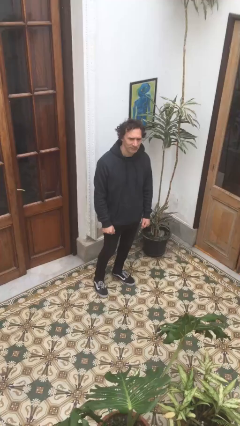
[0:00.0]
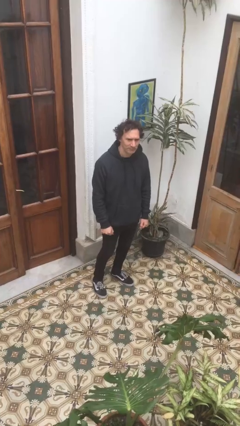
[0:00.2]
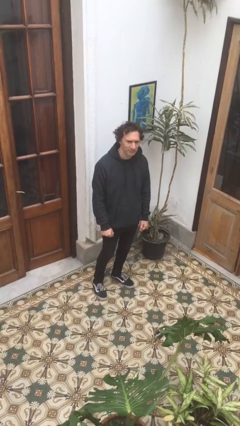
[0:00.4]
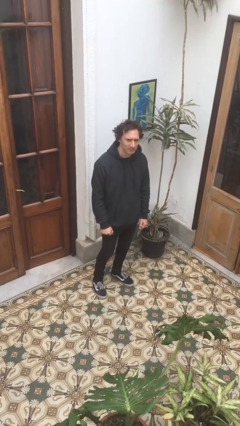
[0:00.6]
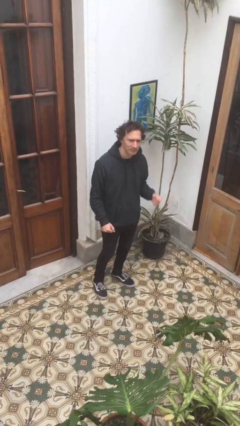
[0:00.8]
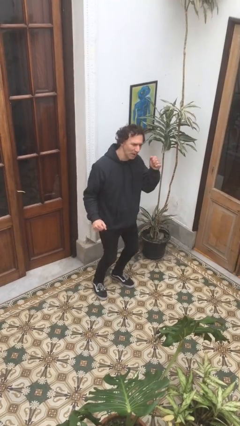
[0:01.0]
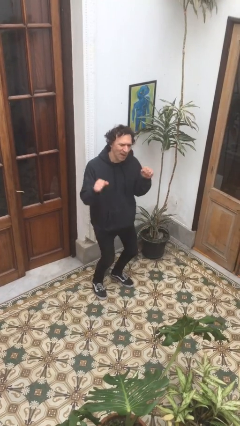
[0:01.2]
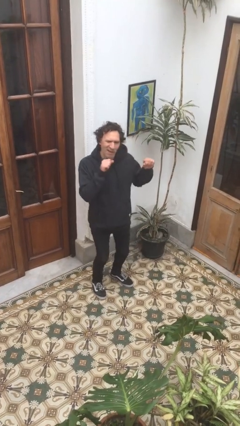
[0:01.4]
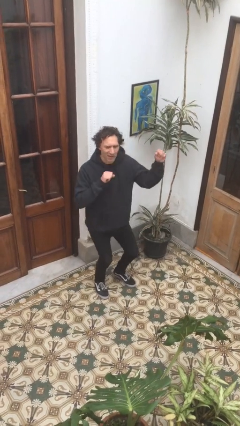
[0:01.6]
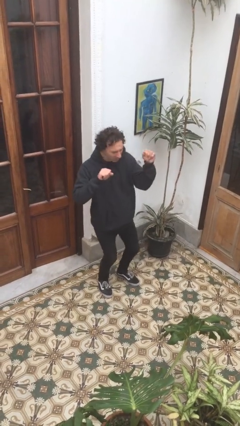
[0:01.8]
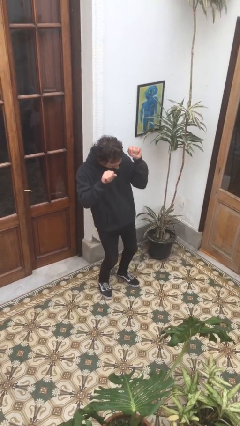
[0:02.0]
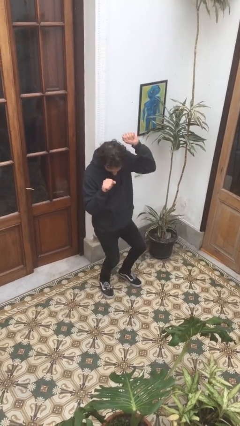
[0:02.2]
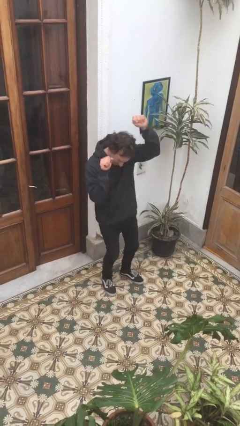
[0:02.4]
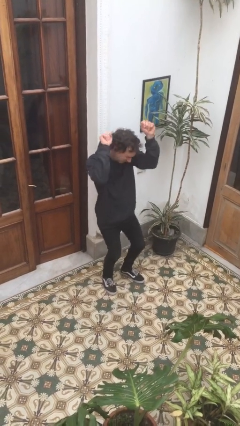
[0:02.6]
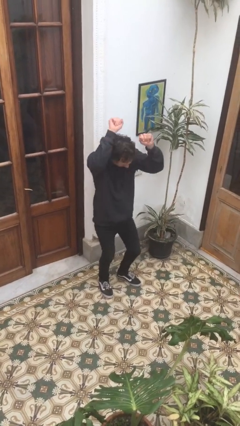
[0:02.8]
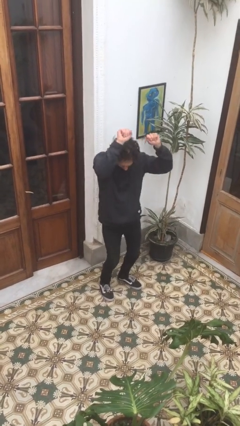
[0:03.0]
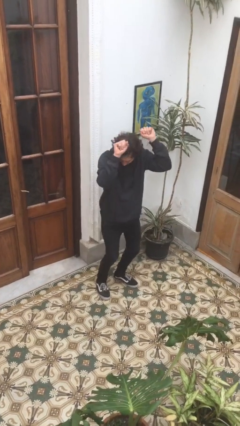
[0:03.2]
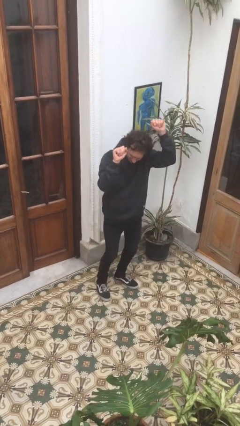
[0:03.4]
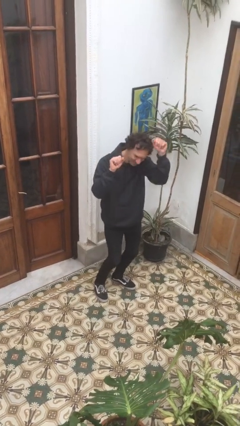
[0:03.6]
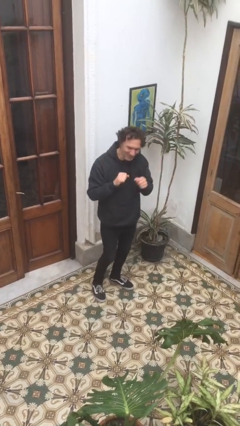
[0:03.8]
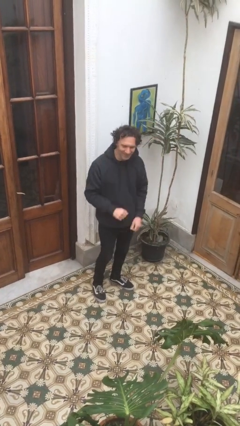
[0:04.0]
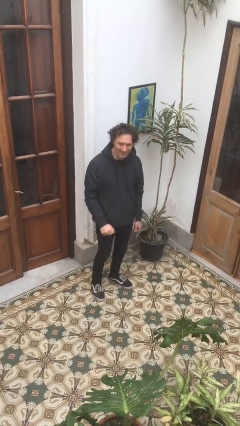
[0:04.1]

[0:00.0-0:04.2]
person dances in place

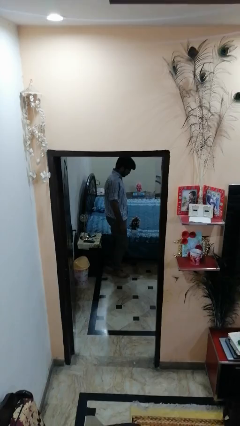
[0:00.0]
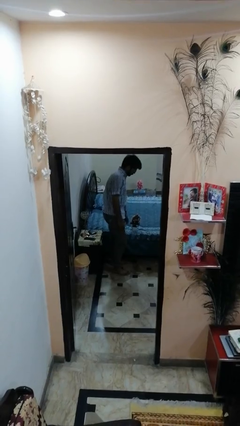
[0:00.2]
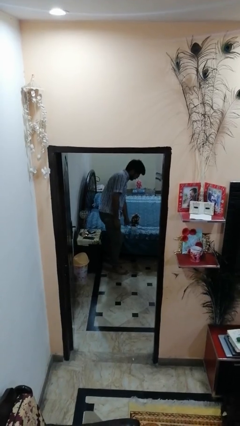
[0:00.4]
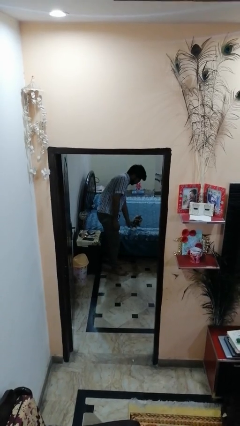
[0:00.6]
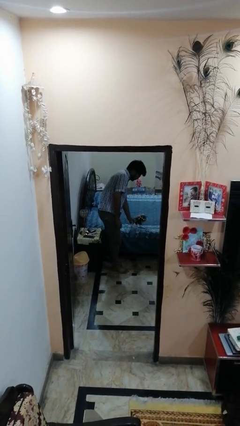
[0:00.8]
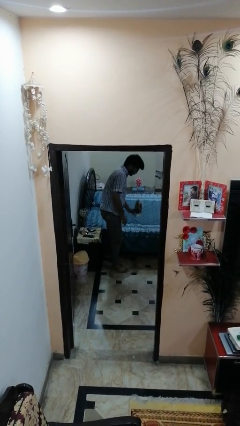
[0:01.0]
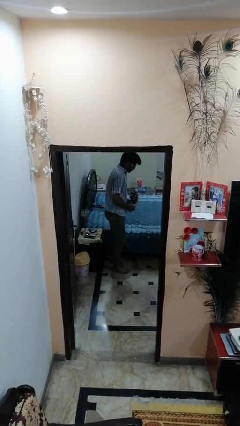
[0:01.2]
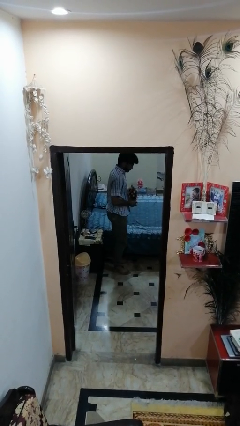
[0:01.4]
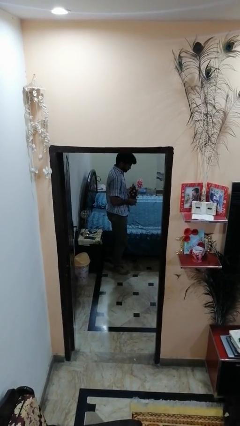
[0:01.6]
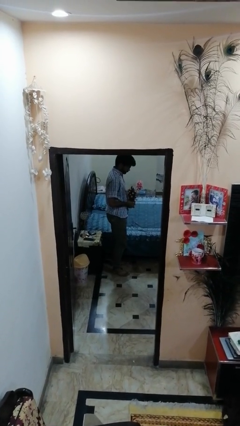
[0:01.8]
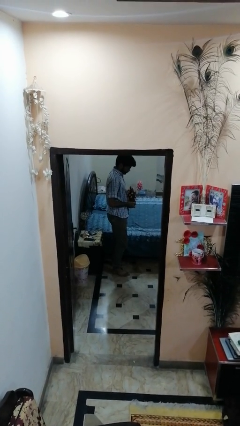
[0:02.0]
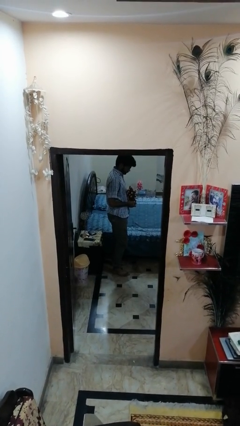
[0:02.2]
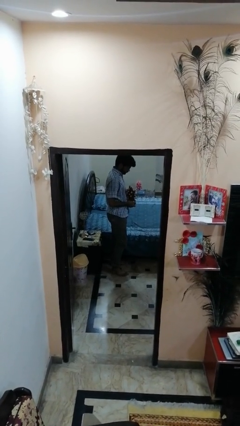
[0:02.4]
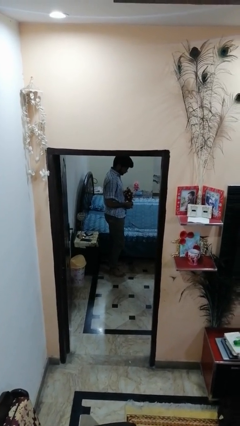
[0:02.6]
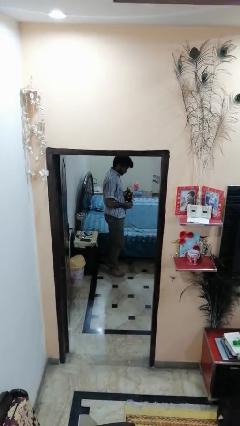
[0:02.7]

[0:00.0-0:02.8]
person picks up object from bed

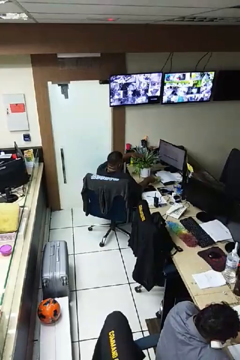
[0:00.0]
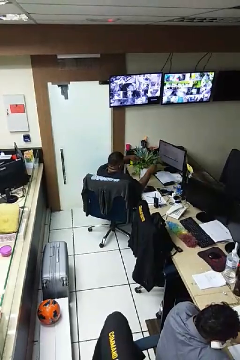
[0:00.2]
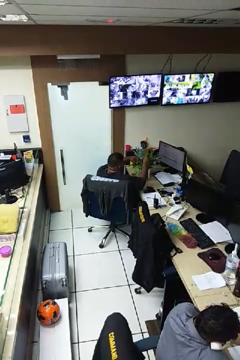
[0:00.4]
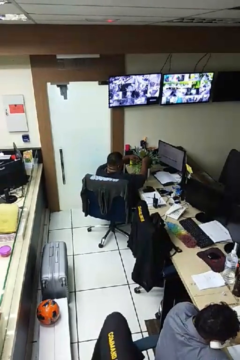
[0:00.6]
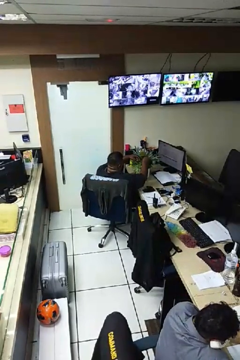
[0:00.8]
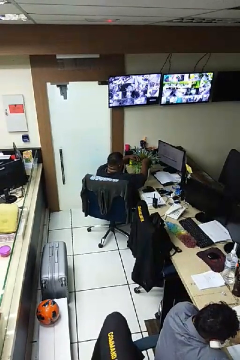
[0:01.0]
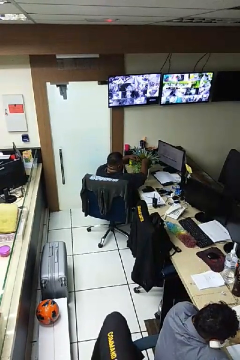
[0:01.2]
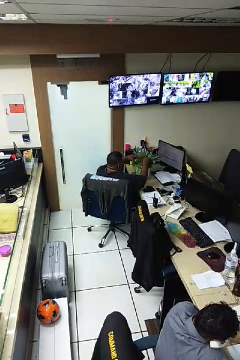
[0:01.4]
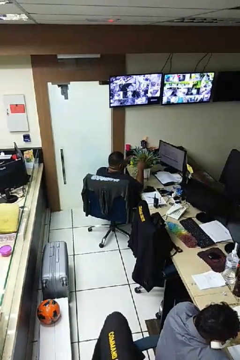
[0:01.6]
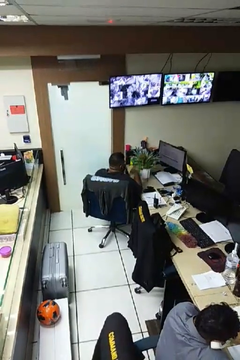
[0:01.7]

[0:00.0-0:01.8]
person arranges flowers in vase

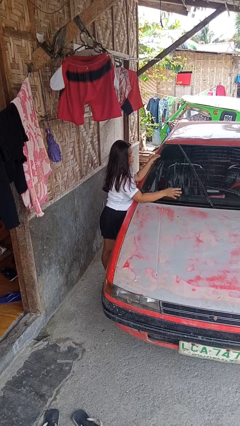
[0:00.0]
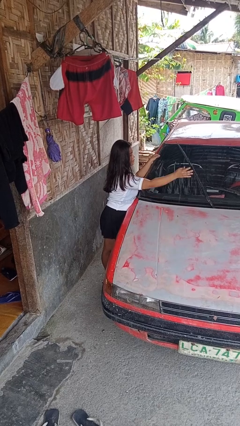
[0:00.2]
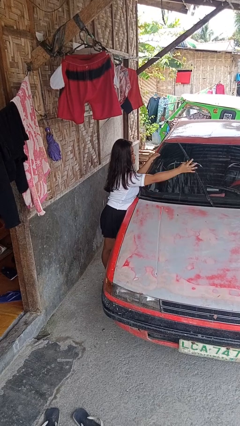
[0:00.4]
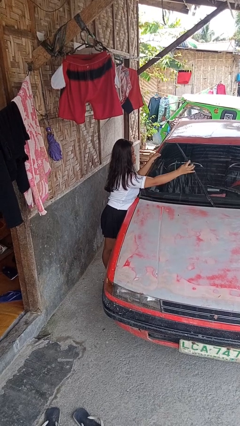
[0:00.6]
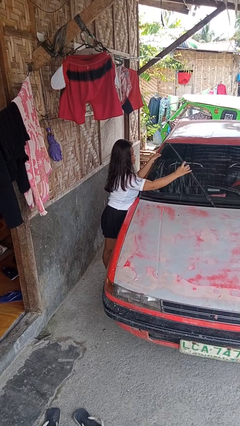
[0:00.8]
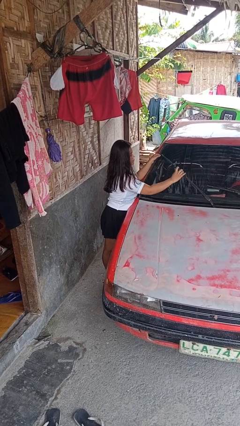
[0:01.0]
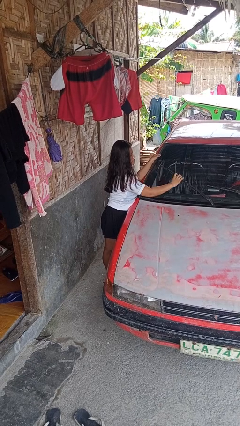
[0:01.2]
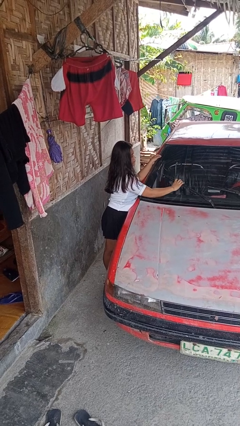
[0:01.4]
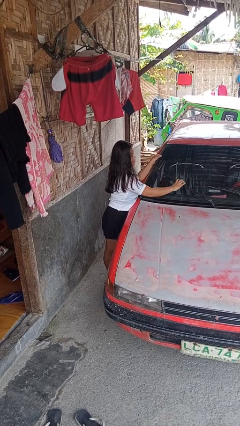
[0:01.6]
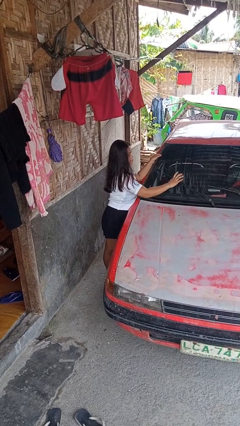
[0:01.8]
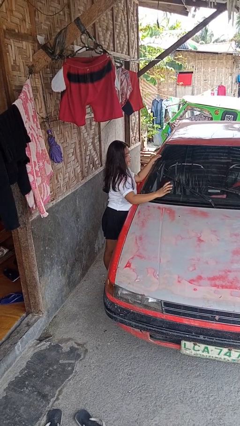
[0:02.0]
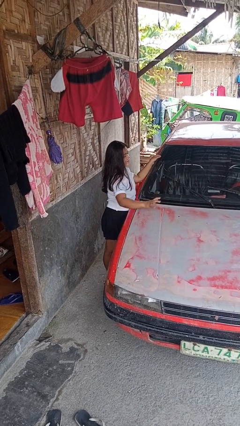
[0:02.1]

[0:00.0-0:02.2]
person flips down car wipers

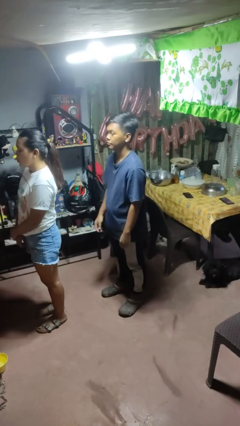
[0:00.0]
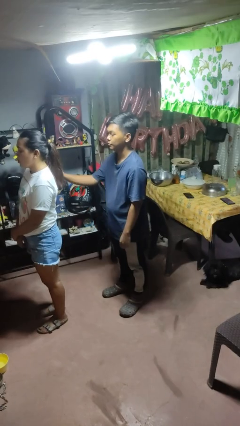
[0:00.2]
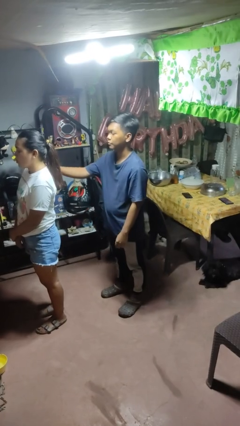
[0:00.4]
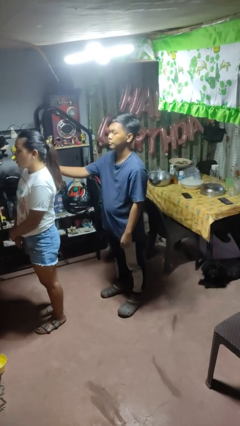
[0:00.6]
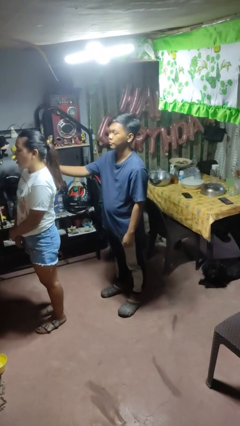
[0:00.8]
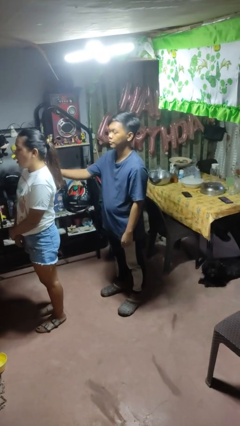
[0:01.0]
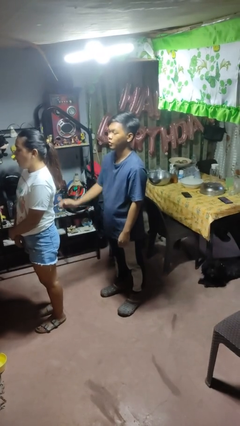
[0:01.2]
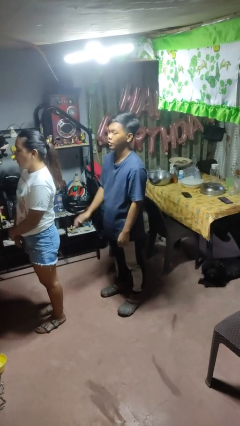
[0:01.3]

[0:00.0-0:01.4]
person pounds shoulders of person

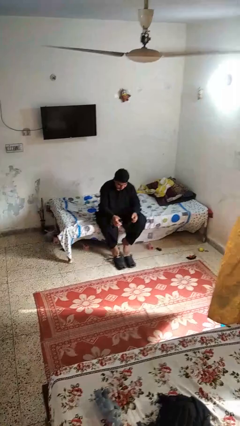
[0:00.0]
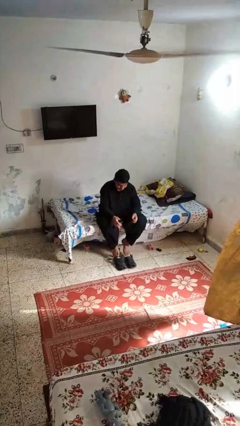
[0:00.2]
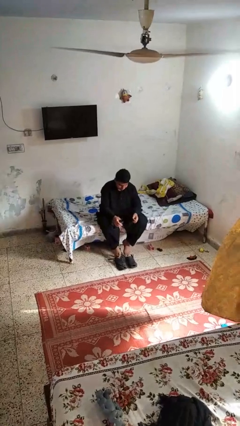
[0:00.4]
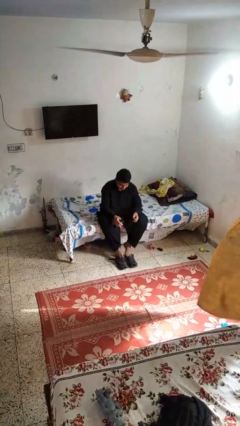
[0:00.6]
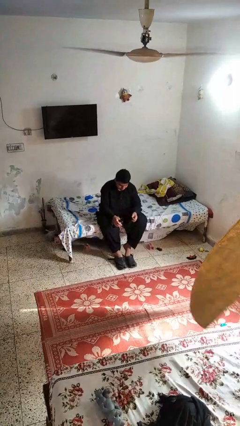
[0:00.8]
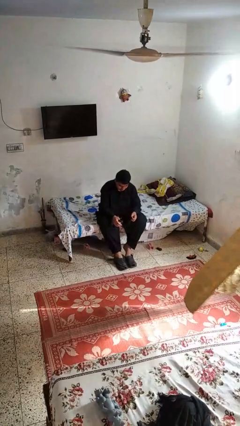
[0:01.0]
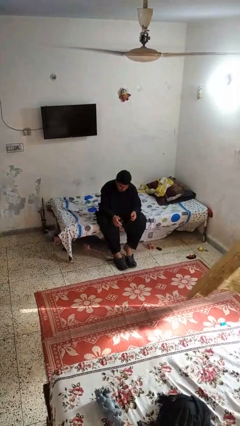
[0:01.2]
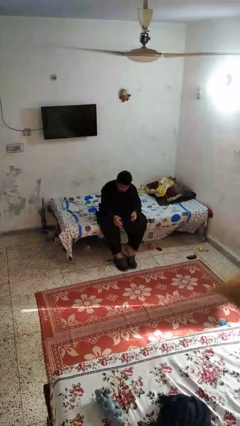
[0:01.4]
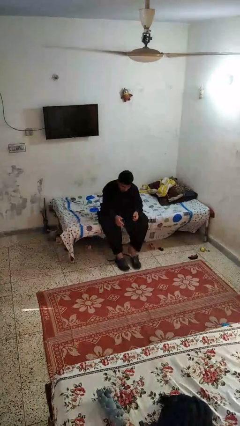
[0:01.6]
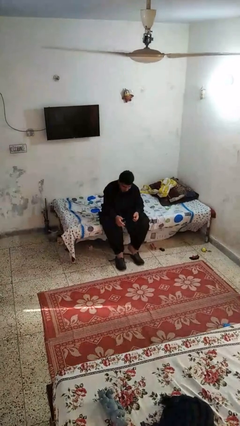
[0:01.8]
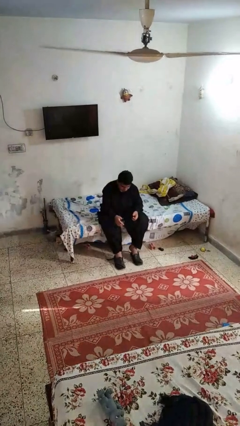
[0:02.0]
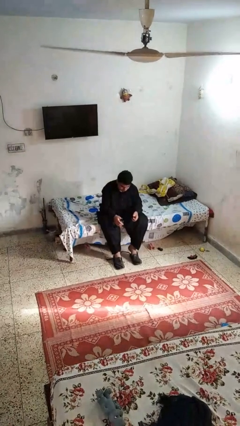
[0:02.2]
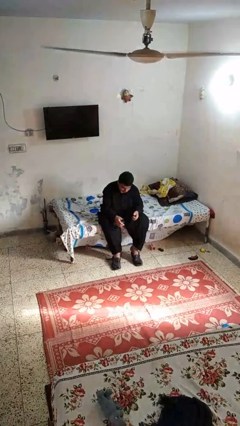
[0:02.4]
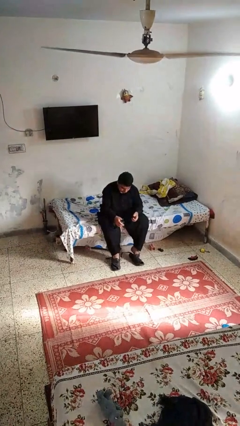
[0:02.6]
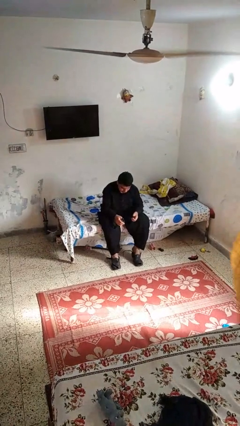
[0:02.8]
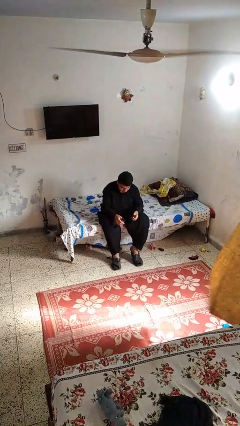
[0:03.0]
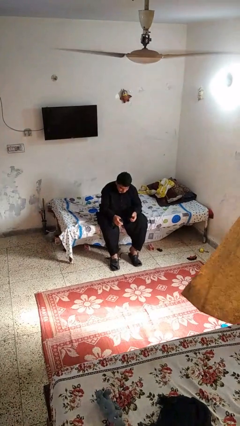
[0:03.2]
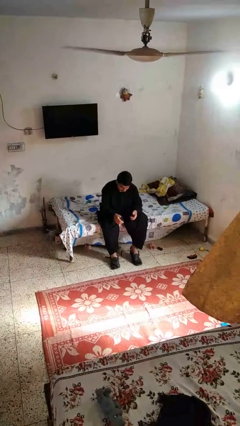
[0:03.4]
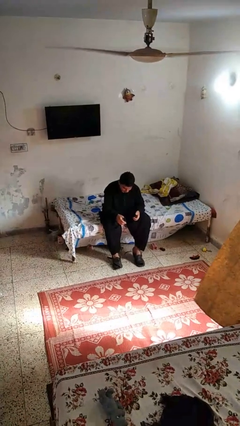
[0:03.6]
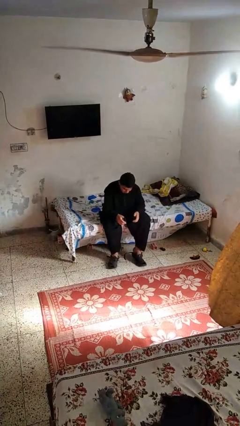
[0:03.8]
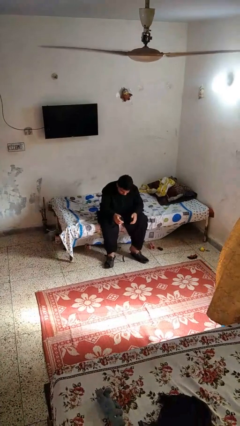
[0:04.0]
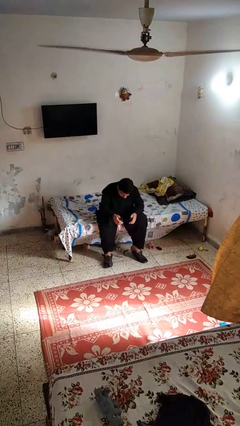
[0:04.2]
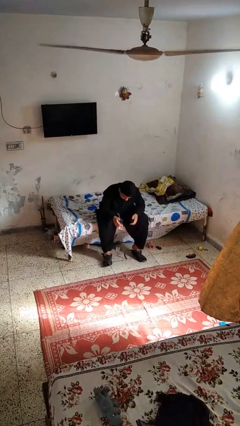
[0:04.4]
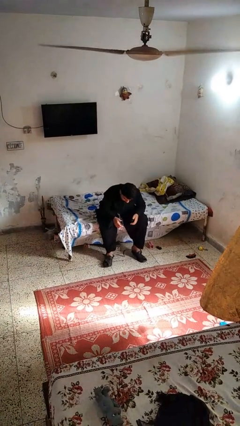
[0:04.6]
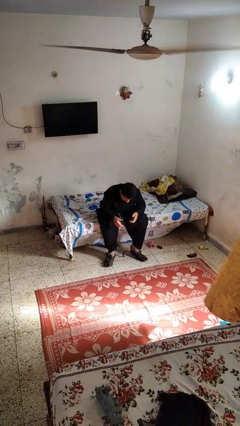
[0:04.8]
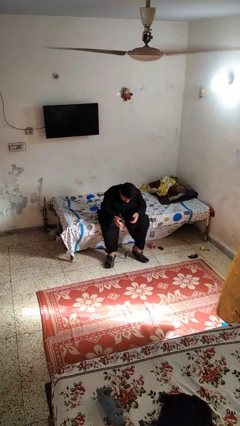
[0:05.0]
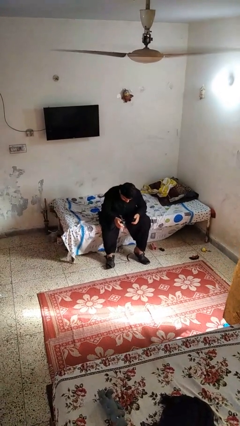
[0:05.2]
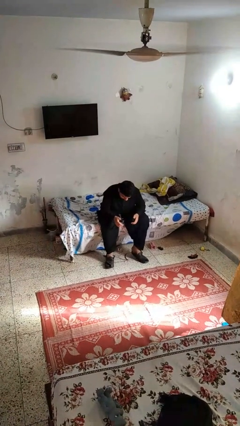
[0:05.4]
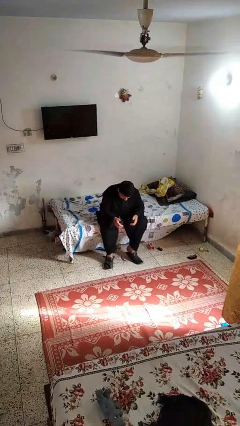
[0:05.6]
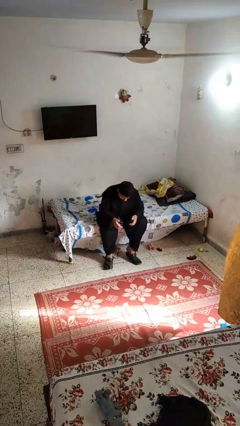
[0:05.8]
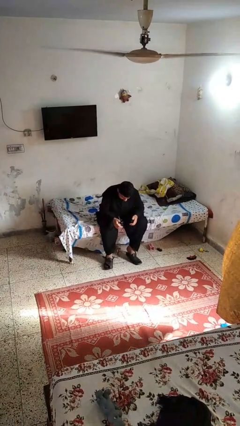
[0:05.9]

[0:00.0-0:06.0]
person puts on shoes
